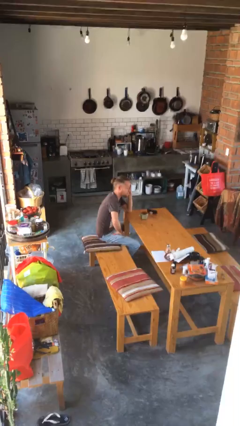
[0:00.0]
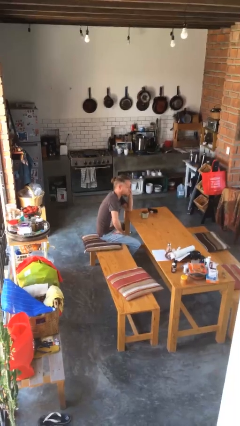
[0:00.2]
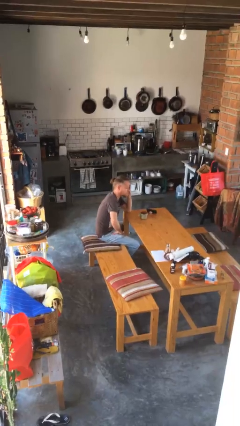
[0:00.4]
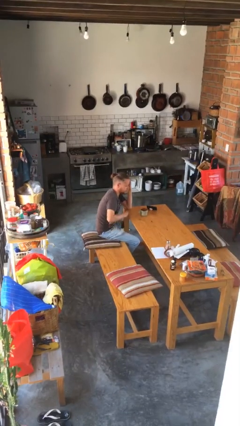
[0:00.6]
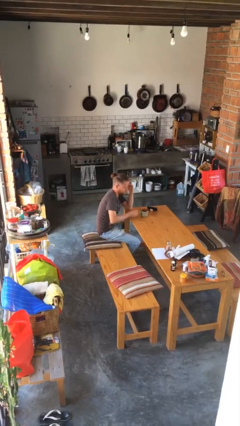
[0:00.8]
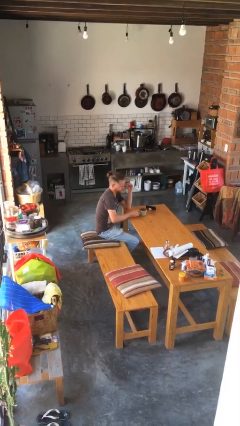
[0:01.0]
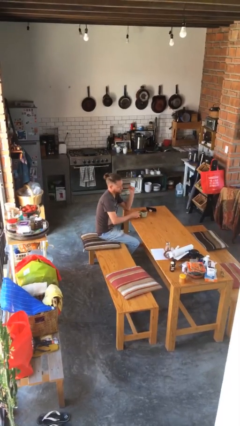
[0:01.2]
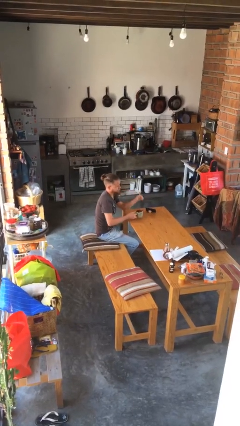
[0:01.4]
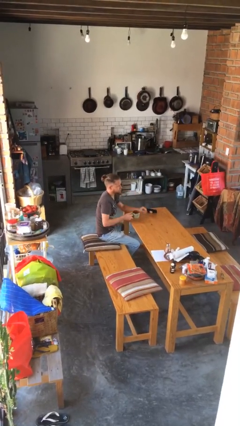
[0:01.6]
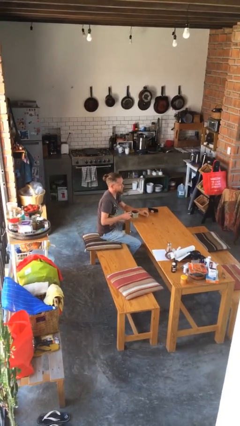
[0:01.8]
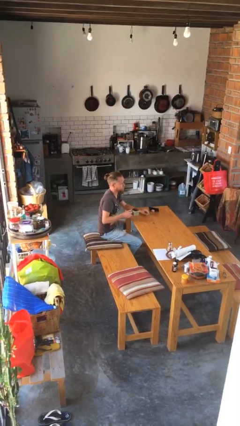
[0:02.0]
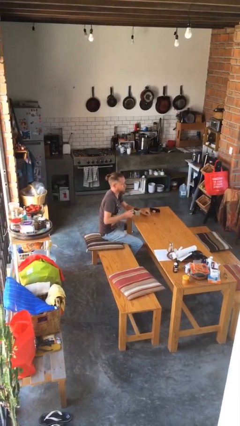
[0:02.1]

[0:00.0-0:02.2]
person picks up object from table

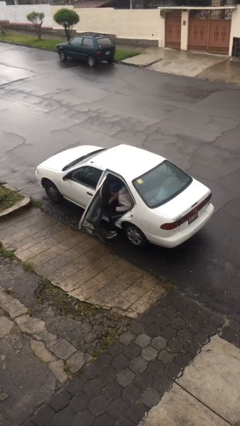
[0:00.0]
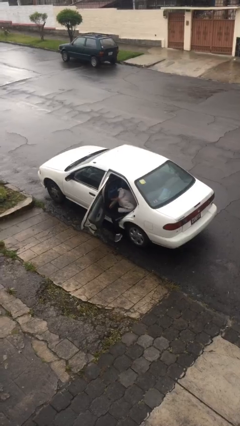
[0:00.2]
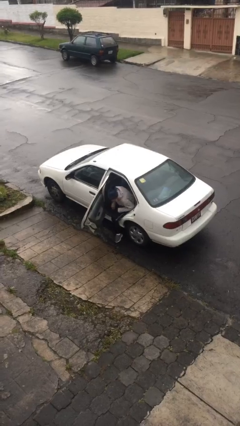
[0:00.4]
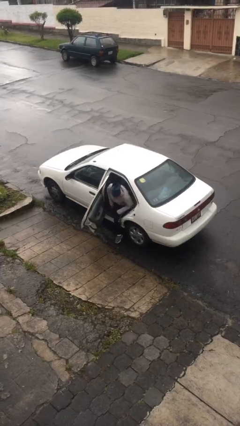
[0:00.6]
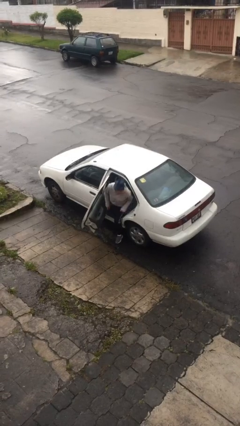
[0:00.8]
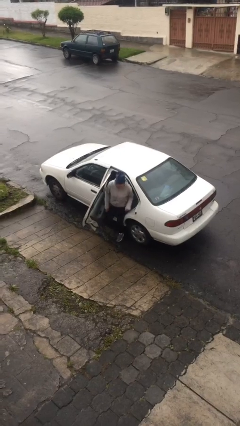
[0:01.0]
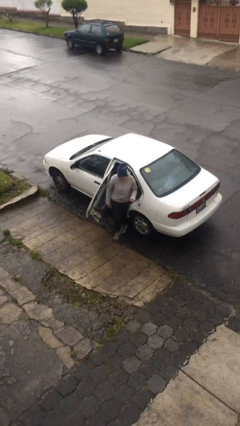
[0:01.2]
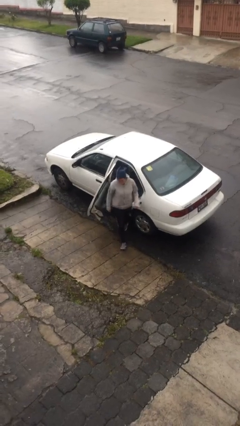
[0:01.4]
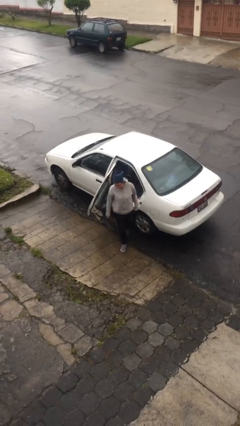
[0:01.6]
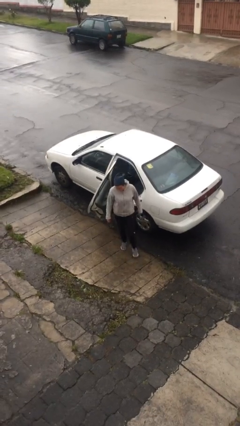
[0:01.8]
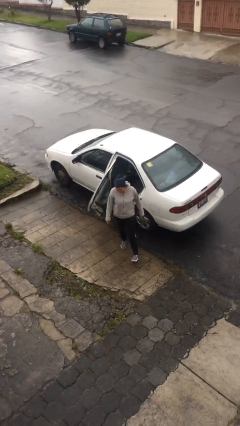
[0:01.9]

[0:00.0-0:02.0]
person exits car

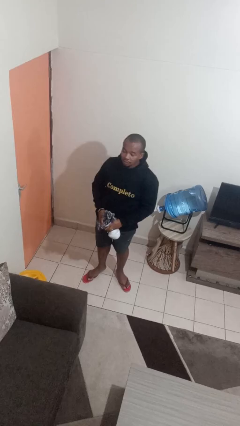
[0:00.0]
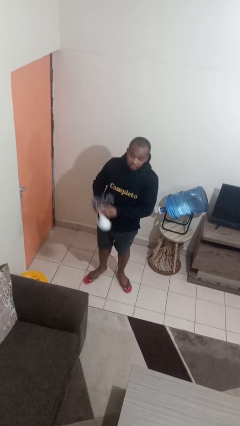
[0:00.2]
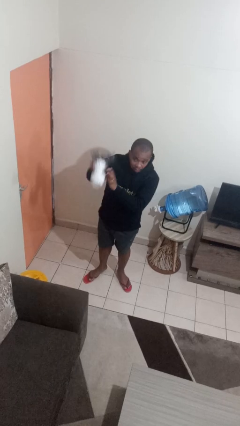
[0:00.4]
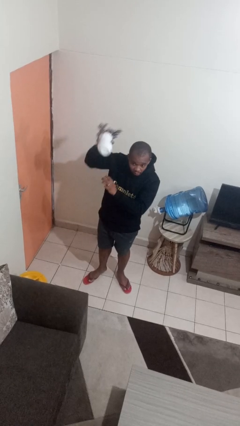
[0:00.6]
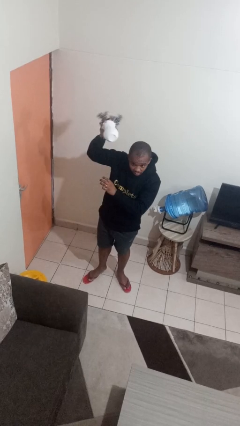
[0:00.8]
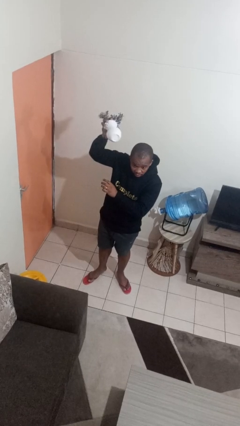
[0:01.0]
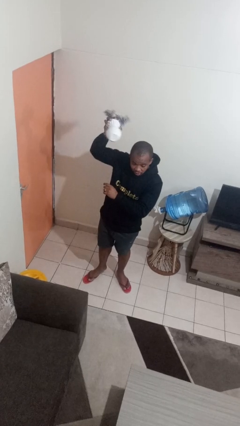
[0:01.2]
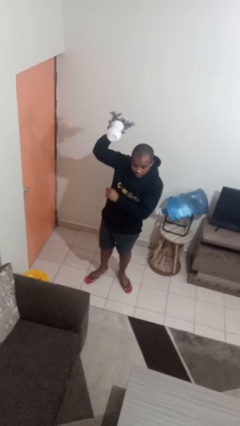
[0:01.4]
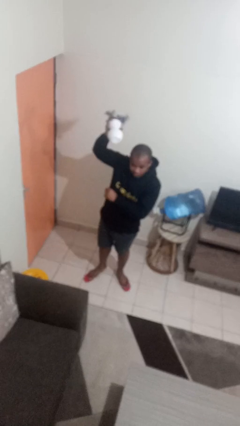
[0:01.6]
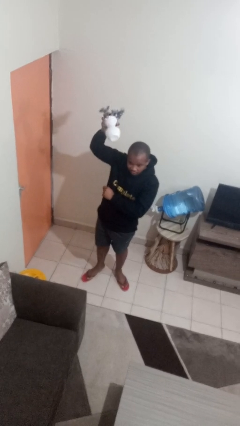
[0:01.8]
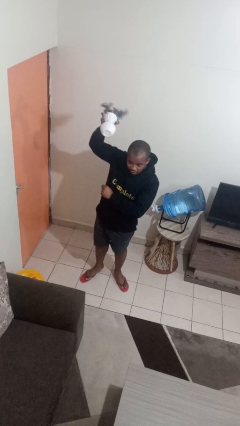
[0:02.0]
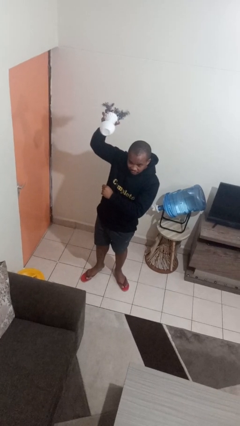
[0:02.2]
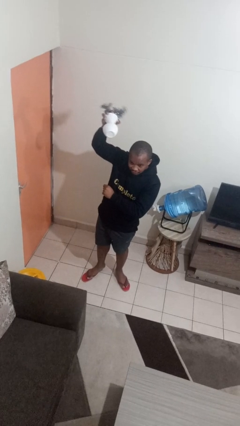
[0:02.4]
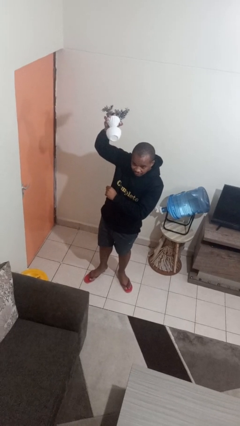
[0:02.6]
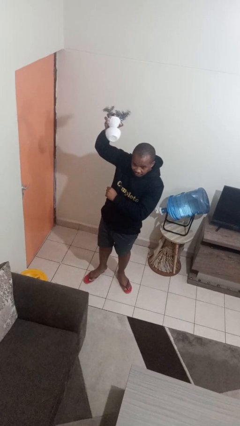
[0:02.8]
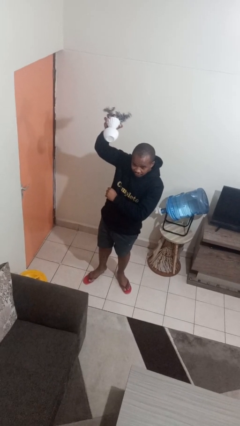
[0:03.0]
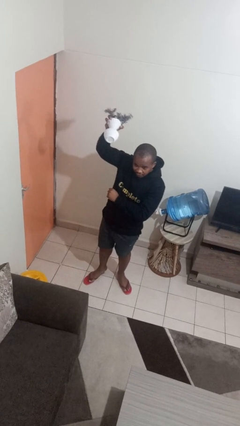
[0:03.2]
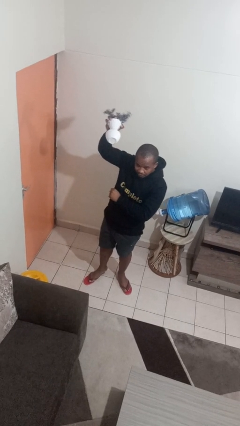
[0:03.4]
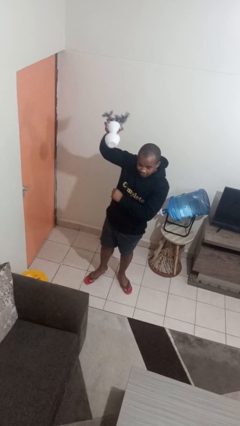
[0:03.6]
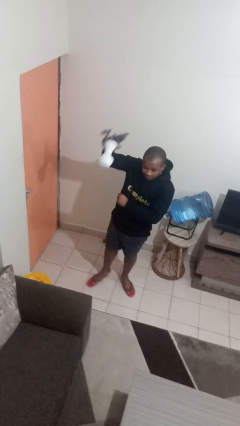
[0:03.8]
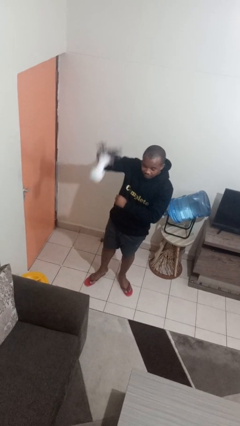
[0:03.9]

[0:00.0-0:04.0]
person holds object above head

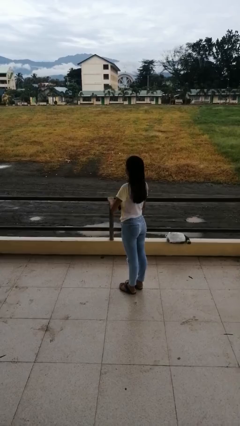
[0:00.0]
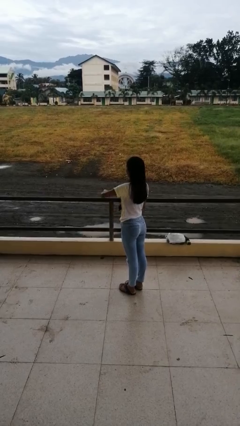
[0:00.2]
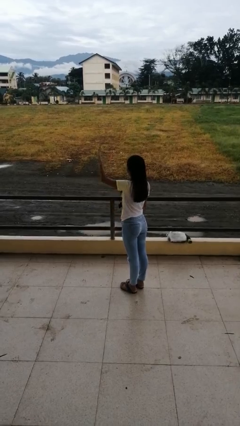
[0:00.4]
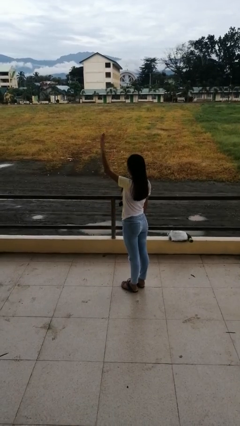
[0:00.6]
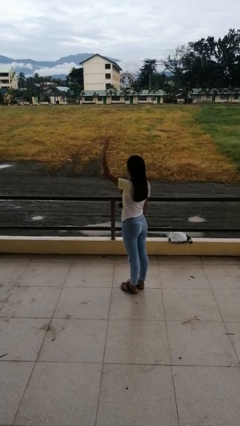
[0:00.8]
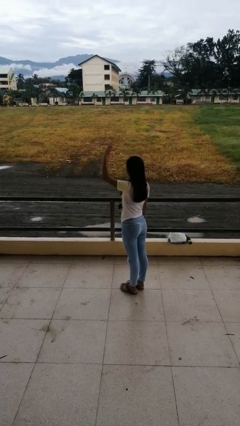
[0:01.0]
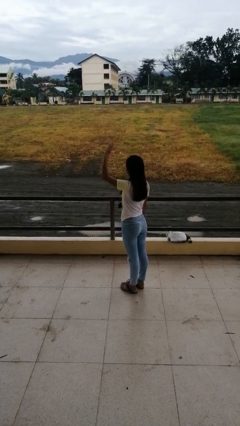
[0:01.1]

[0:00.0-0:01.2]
person gestures swipe up

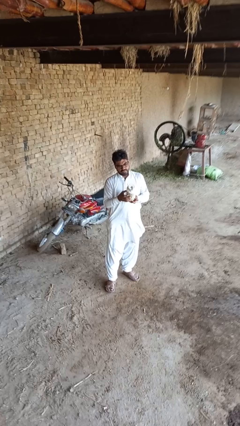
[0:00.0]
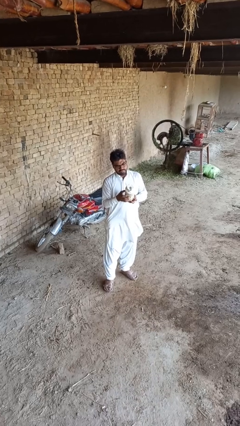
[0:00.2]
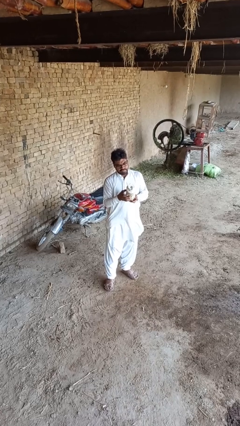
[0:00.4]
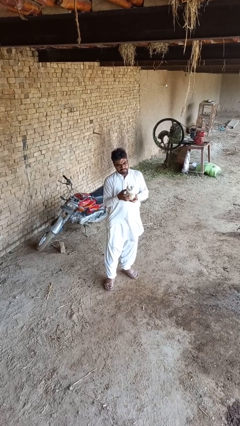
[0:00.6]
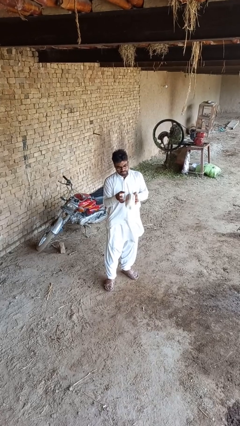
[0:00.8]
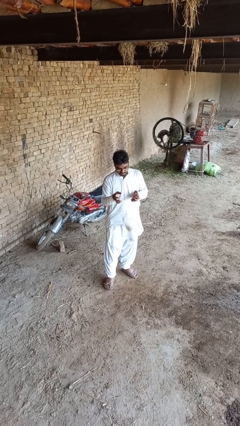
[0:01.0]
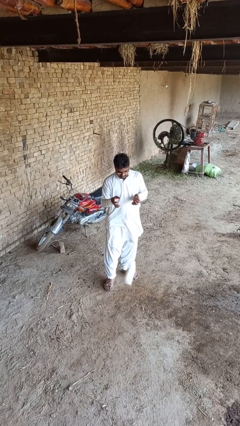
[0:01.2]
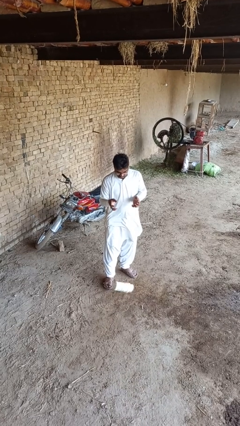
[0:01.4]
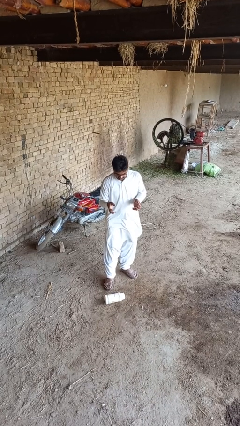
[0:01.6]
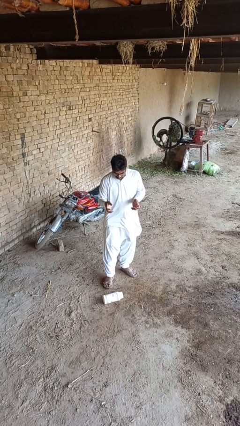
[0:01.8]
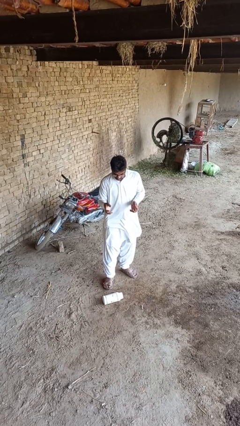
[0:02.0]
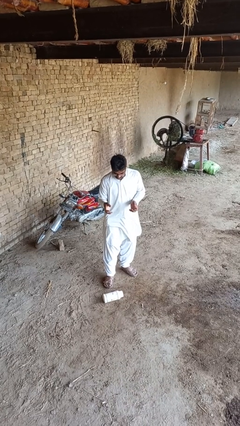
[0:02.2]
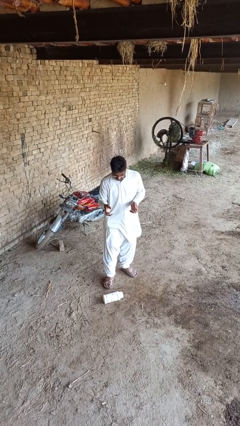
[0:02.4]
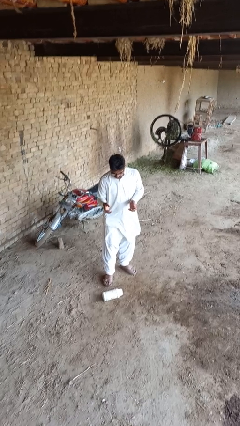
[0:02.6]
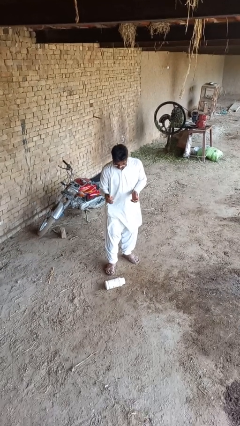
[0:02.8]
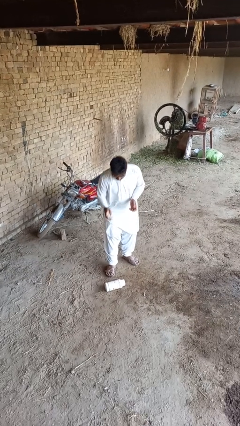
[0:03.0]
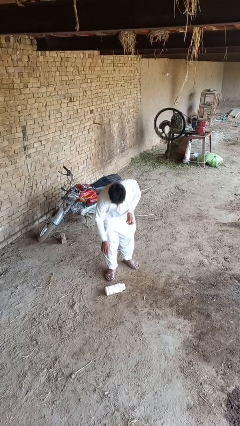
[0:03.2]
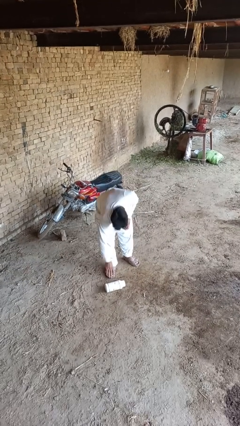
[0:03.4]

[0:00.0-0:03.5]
person drops object

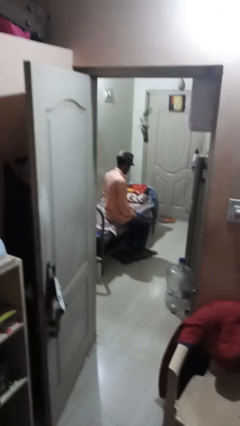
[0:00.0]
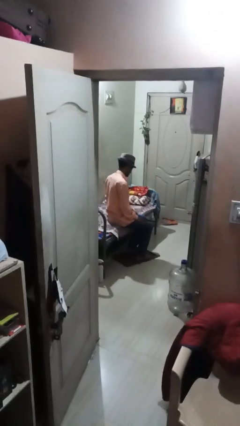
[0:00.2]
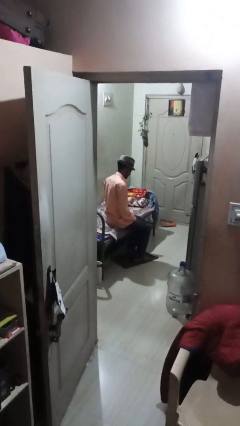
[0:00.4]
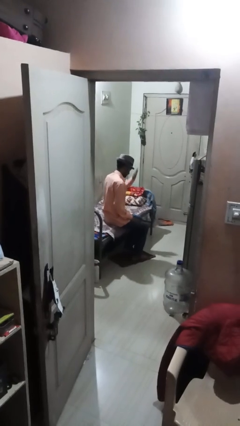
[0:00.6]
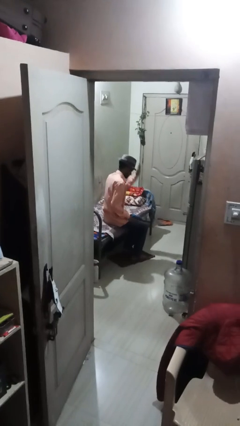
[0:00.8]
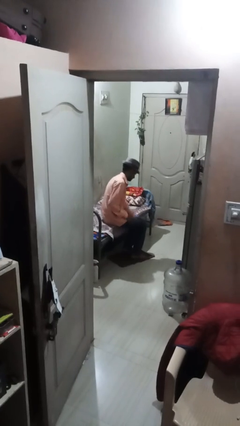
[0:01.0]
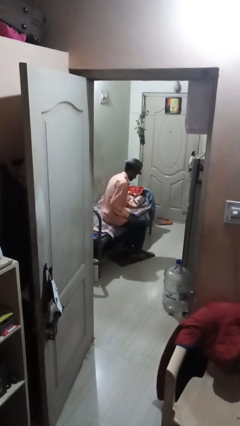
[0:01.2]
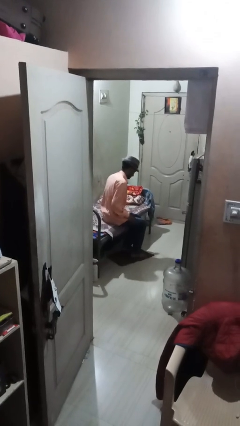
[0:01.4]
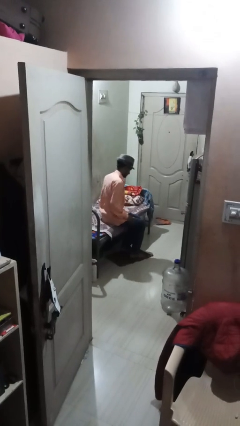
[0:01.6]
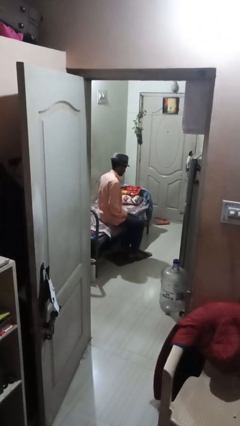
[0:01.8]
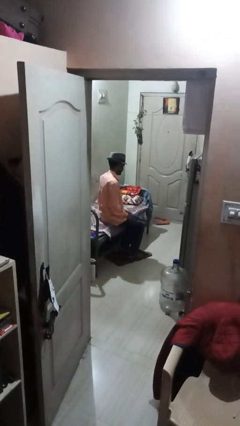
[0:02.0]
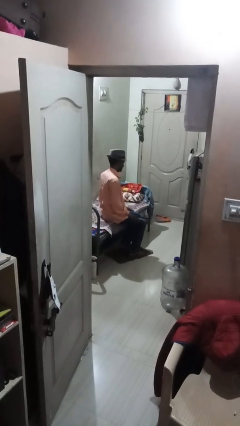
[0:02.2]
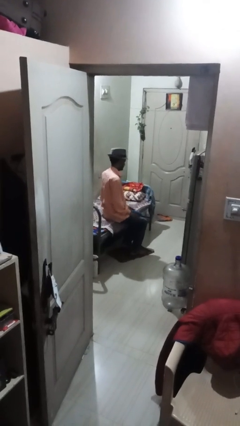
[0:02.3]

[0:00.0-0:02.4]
person swats bug

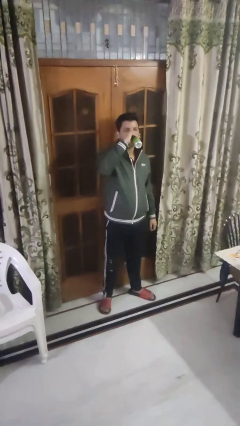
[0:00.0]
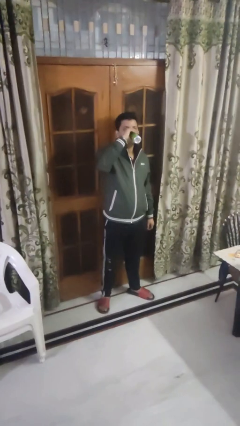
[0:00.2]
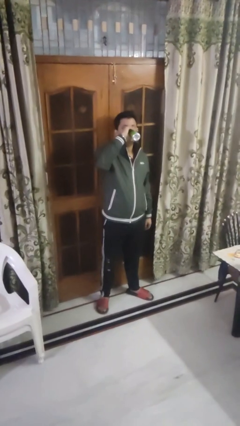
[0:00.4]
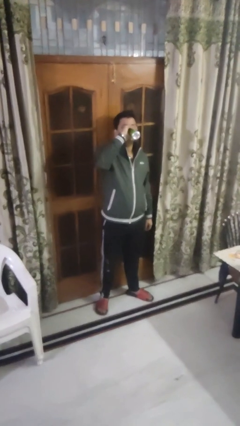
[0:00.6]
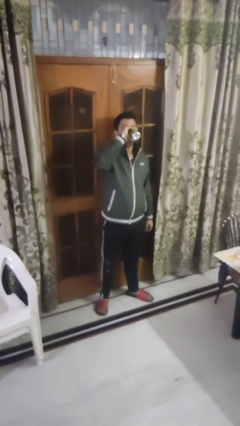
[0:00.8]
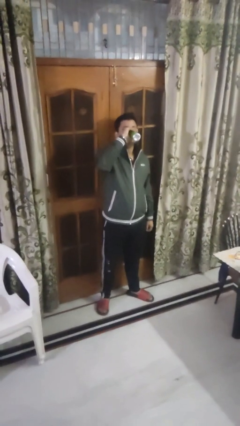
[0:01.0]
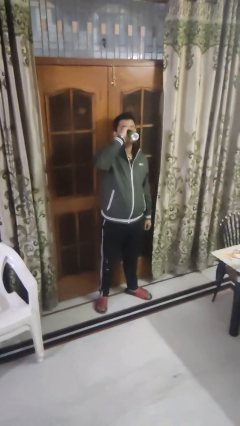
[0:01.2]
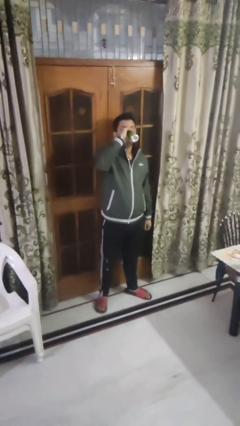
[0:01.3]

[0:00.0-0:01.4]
person drinks from beverage can

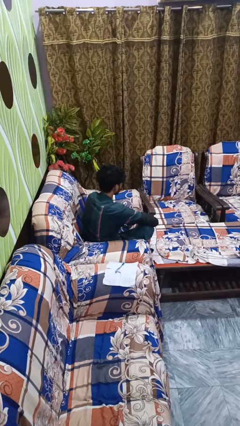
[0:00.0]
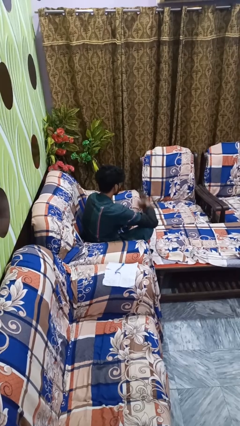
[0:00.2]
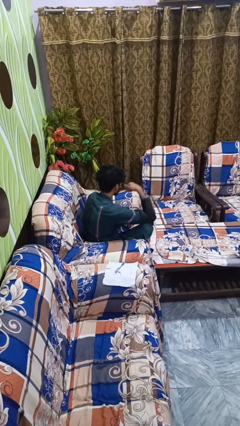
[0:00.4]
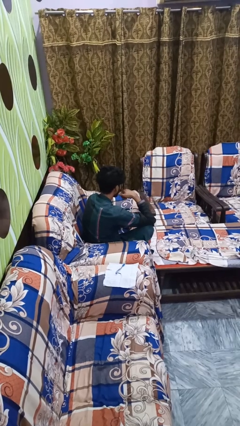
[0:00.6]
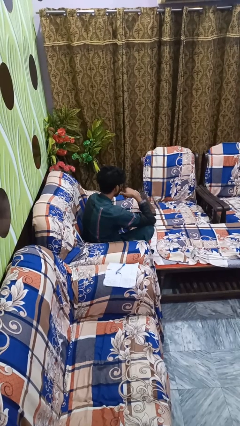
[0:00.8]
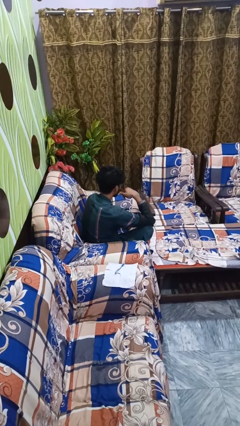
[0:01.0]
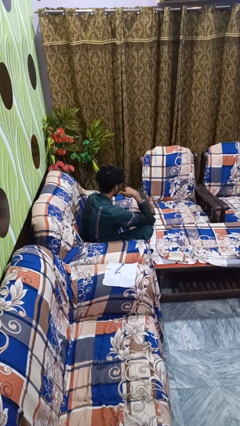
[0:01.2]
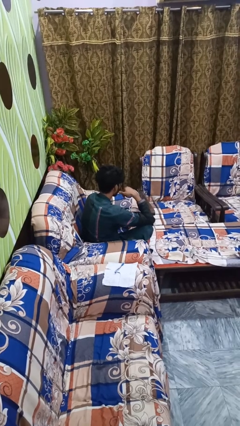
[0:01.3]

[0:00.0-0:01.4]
person gestures call me